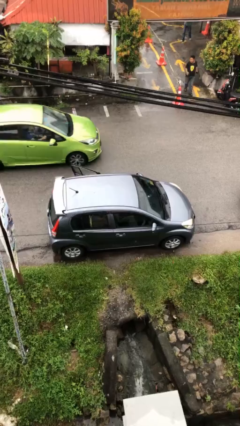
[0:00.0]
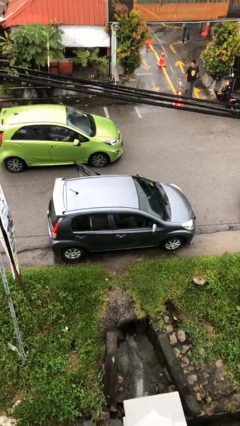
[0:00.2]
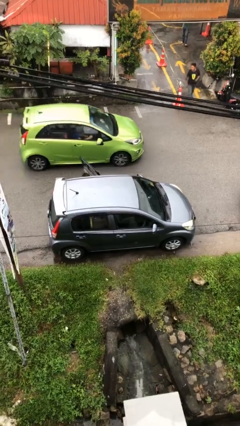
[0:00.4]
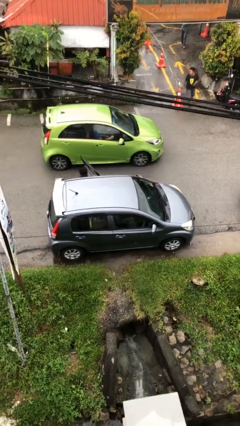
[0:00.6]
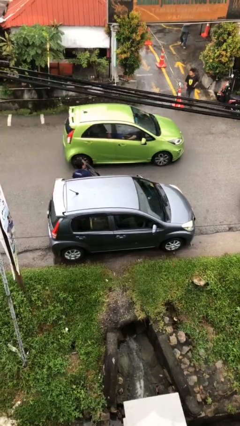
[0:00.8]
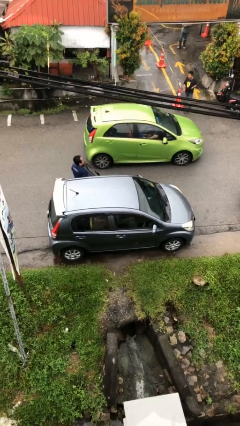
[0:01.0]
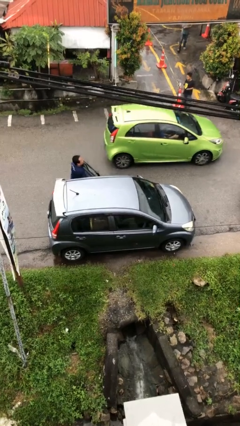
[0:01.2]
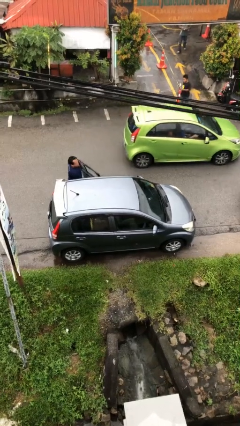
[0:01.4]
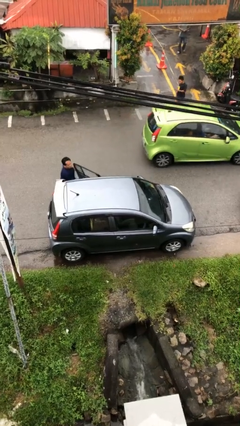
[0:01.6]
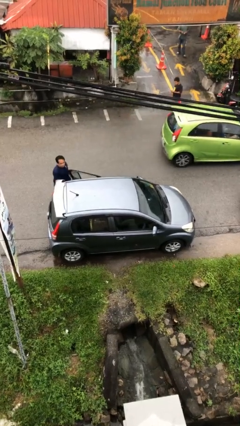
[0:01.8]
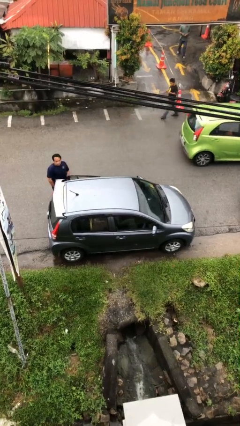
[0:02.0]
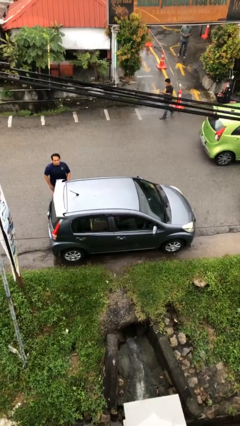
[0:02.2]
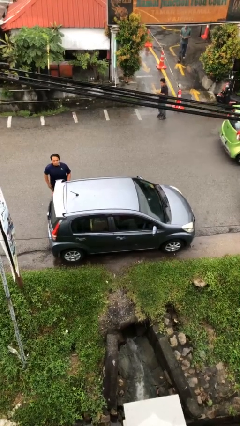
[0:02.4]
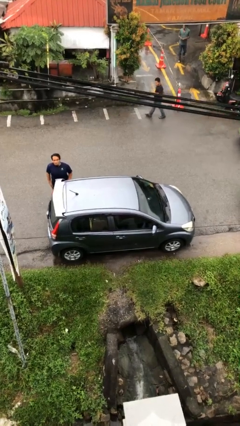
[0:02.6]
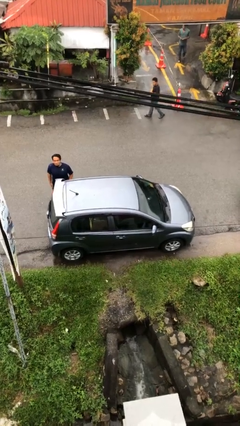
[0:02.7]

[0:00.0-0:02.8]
car drops off person

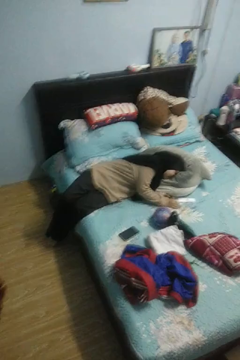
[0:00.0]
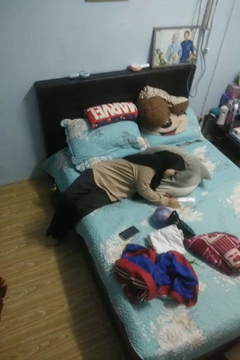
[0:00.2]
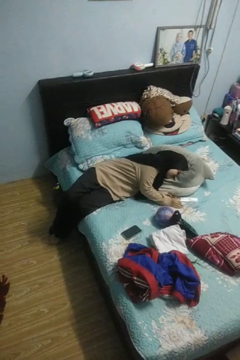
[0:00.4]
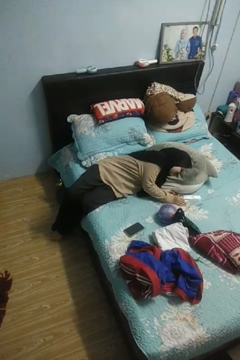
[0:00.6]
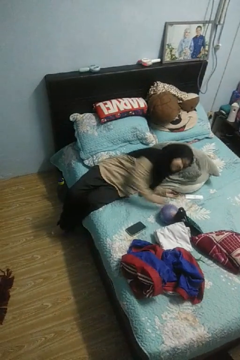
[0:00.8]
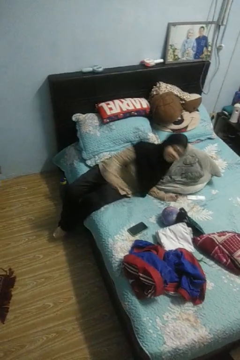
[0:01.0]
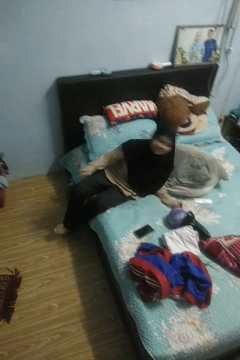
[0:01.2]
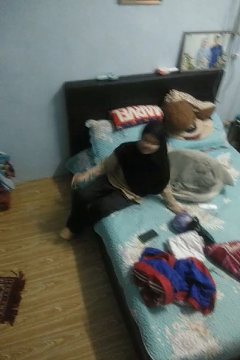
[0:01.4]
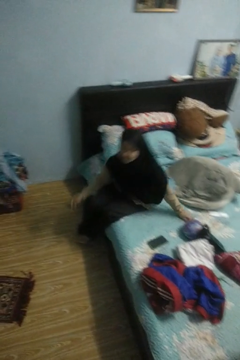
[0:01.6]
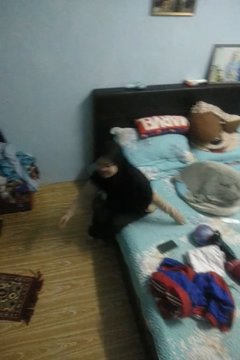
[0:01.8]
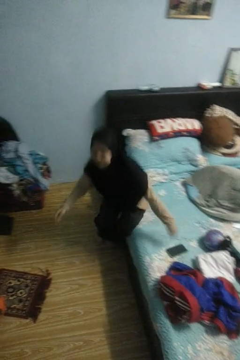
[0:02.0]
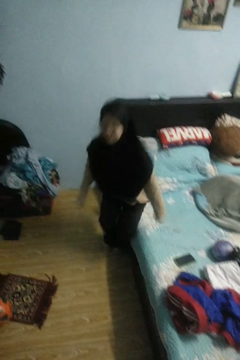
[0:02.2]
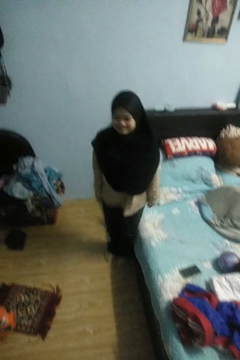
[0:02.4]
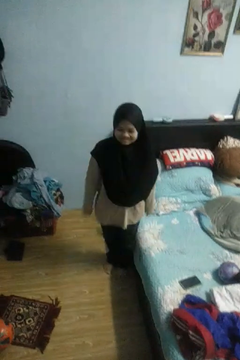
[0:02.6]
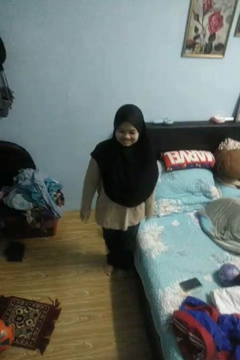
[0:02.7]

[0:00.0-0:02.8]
person stands up

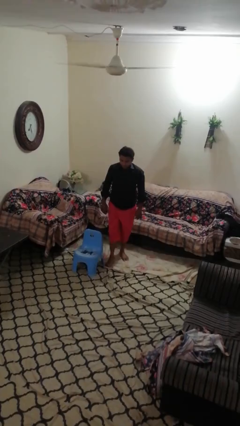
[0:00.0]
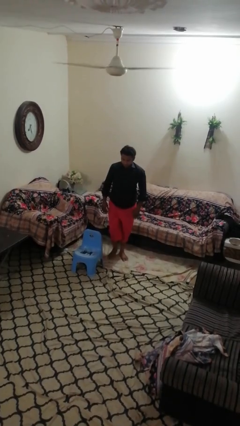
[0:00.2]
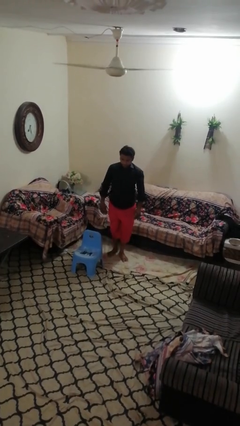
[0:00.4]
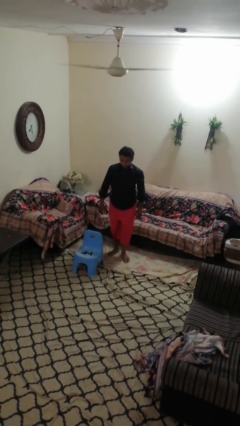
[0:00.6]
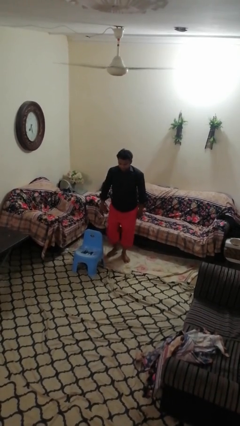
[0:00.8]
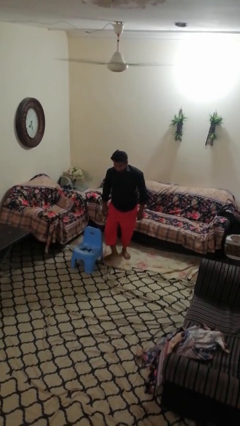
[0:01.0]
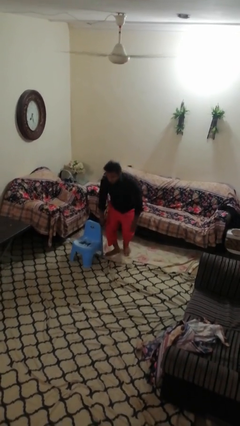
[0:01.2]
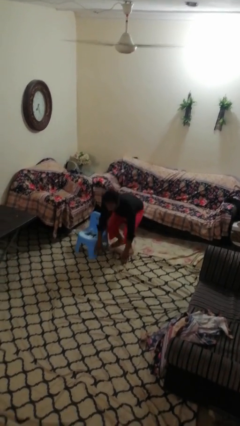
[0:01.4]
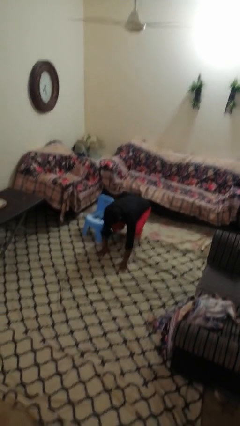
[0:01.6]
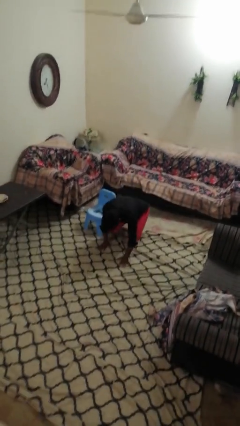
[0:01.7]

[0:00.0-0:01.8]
person trips on object on floor

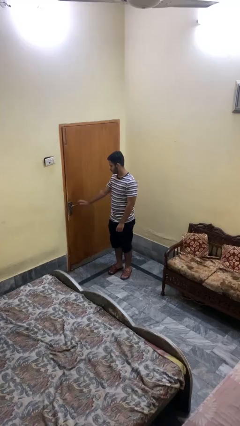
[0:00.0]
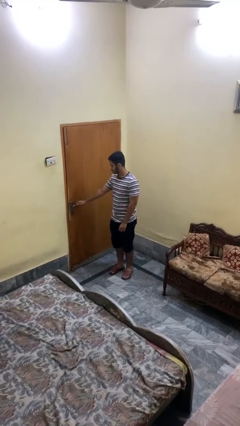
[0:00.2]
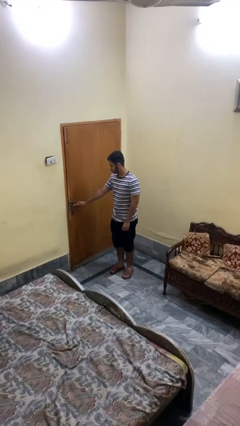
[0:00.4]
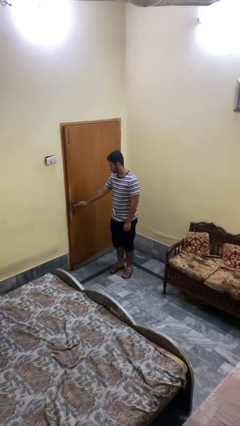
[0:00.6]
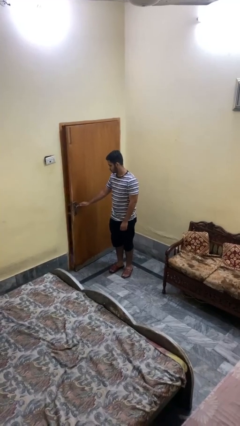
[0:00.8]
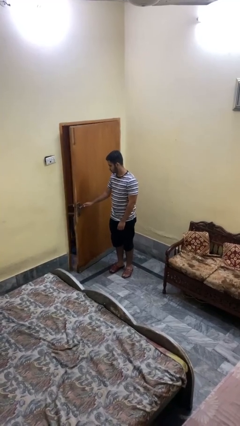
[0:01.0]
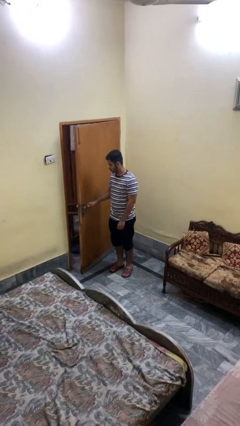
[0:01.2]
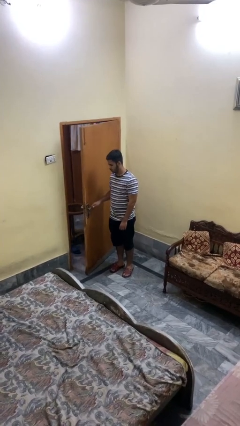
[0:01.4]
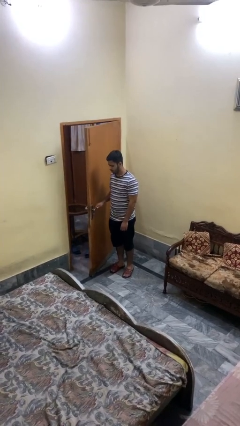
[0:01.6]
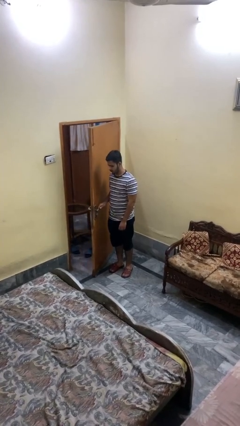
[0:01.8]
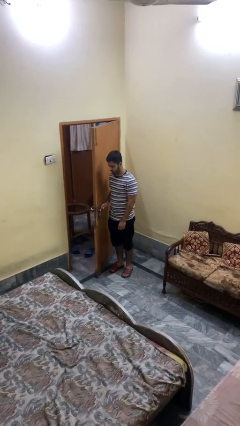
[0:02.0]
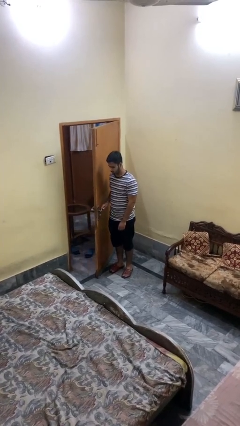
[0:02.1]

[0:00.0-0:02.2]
person opens facility door

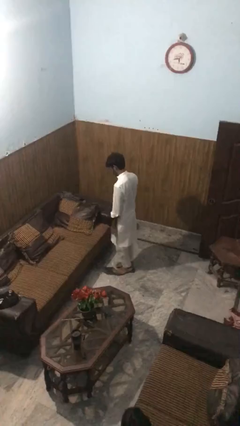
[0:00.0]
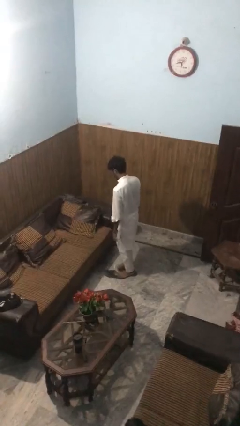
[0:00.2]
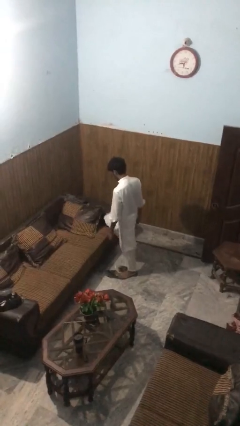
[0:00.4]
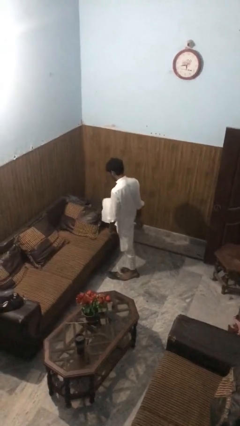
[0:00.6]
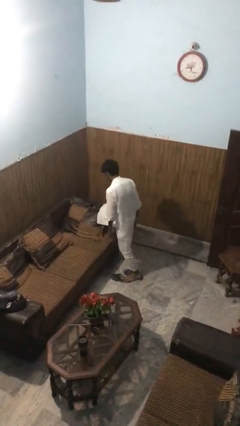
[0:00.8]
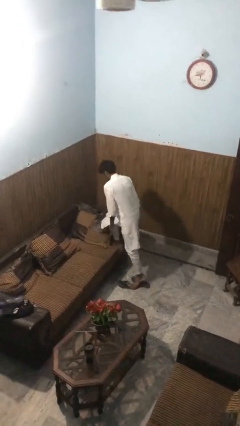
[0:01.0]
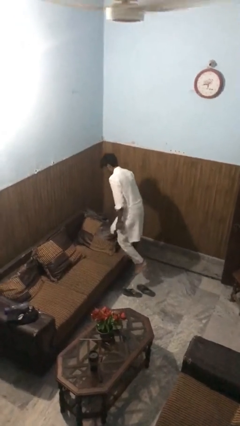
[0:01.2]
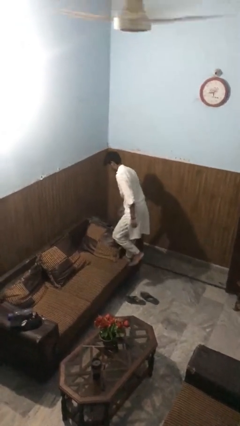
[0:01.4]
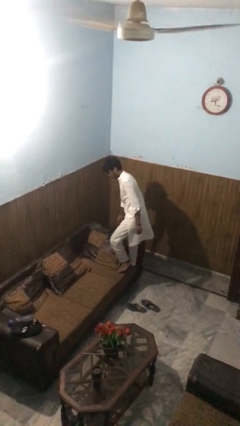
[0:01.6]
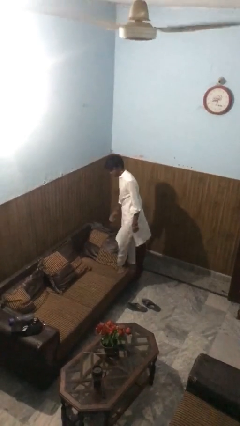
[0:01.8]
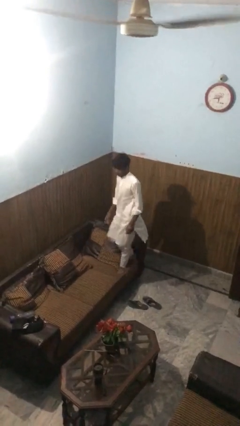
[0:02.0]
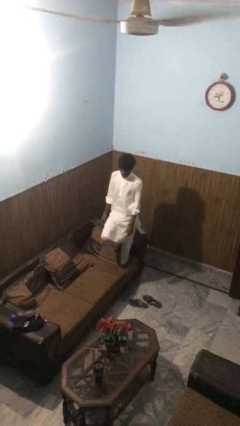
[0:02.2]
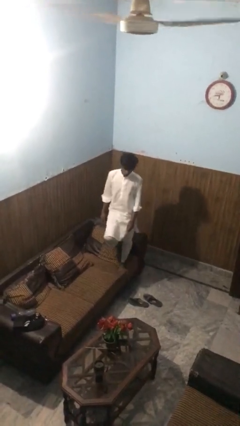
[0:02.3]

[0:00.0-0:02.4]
person climbs on couch

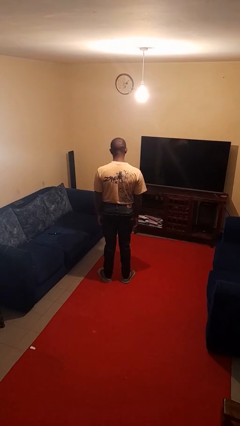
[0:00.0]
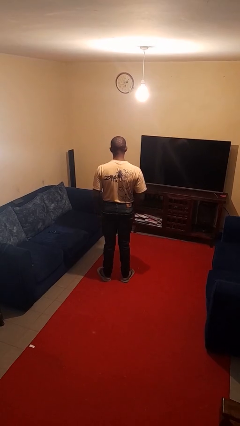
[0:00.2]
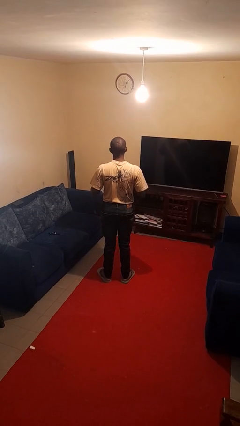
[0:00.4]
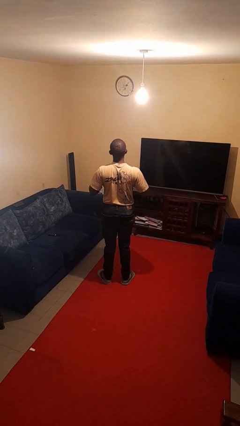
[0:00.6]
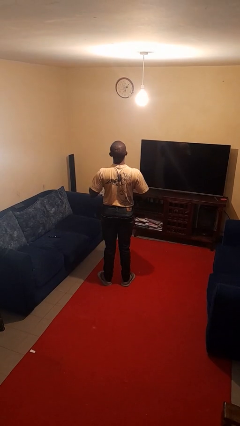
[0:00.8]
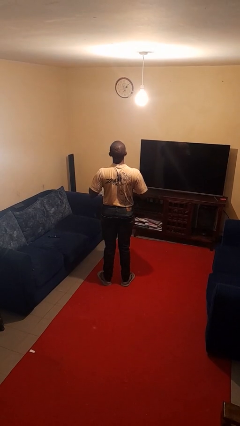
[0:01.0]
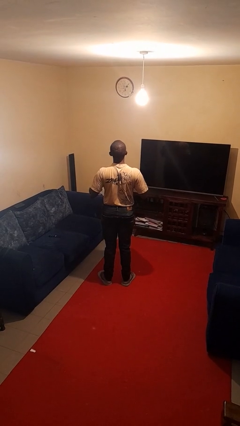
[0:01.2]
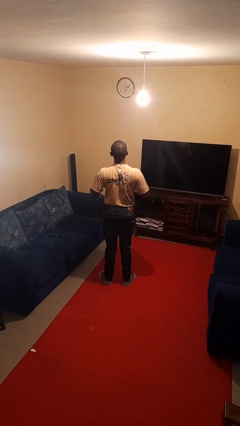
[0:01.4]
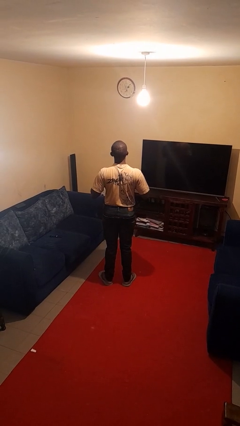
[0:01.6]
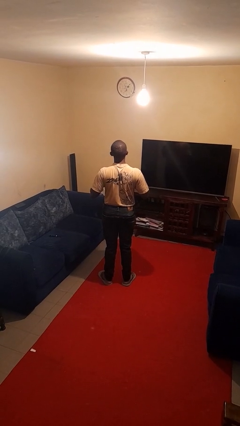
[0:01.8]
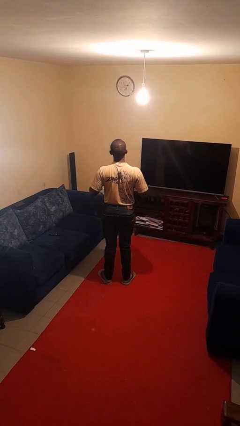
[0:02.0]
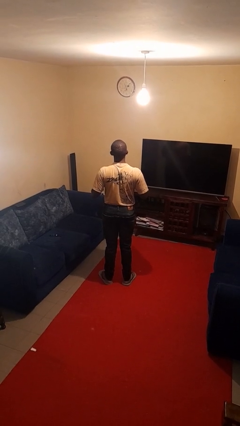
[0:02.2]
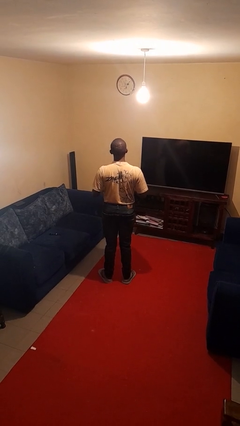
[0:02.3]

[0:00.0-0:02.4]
person drums on chest

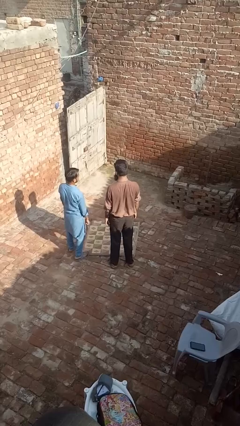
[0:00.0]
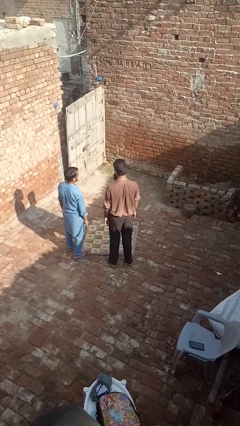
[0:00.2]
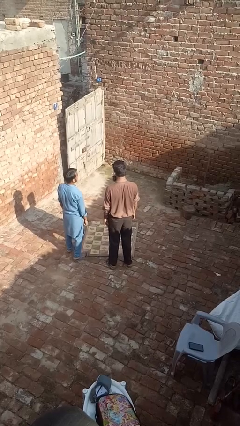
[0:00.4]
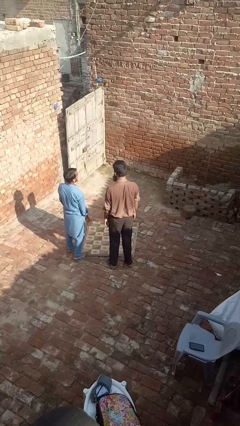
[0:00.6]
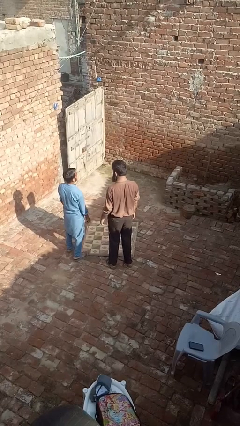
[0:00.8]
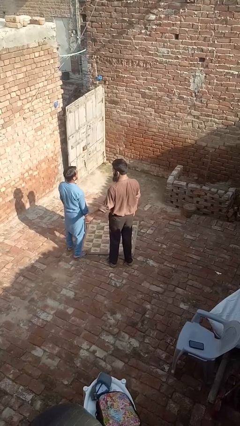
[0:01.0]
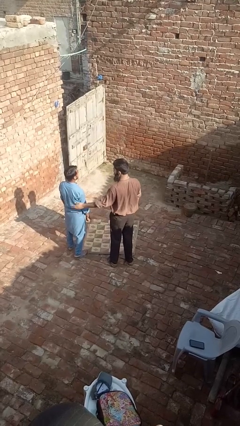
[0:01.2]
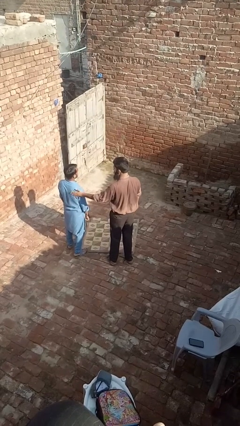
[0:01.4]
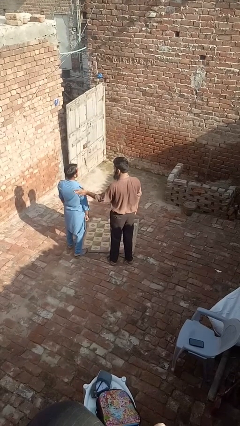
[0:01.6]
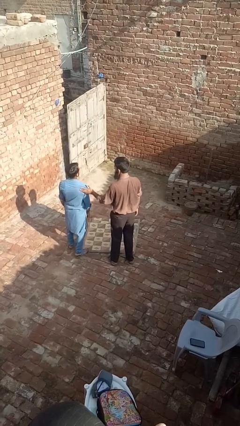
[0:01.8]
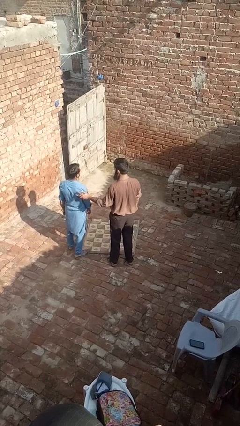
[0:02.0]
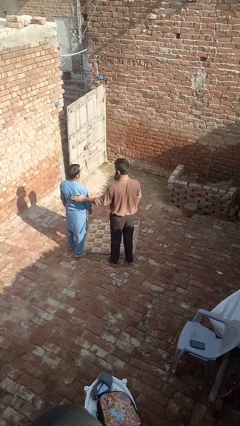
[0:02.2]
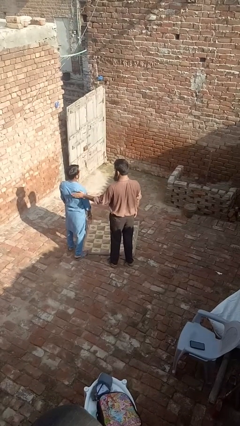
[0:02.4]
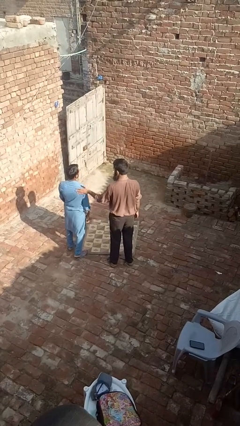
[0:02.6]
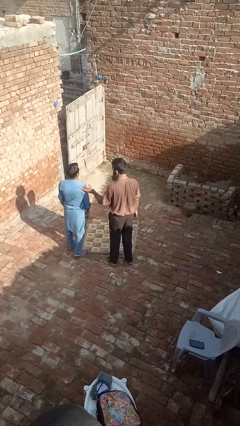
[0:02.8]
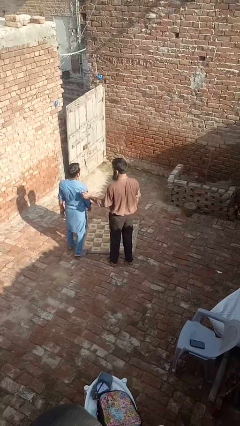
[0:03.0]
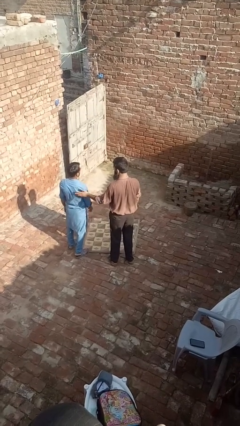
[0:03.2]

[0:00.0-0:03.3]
person shoves person
